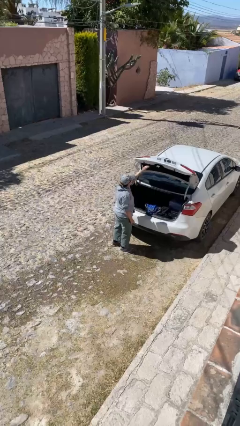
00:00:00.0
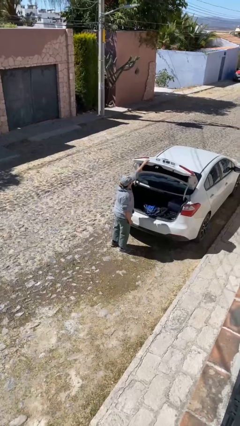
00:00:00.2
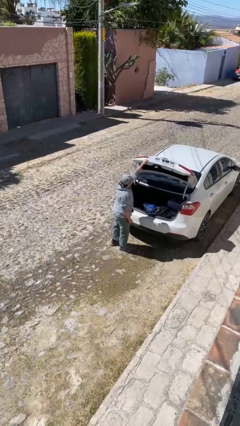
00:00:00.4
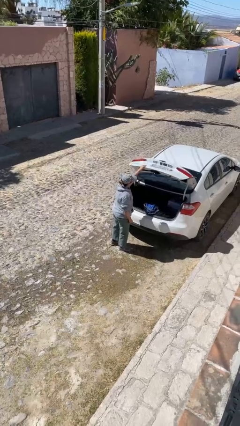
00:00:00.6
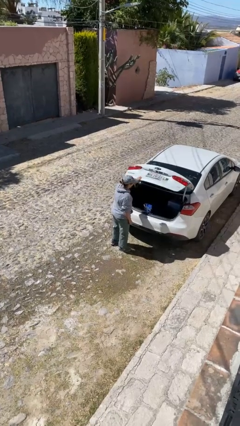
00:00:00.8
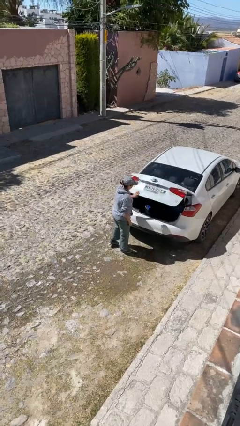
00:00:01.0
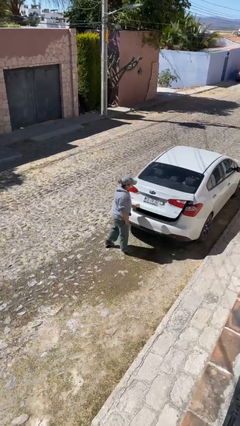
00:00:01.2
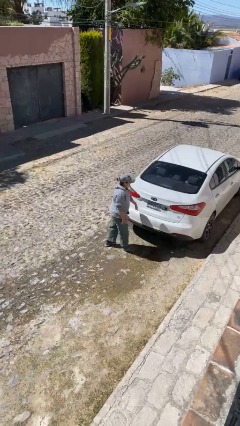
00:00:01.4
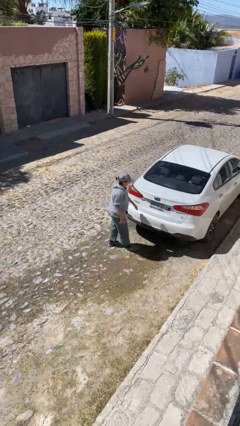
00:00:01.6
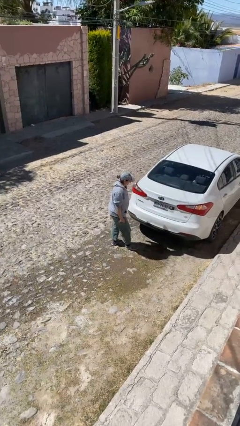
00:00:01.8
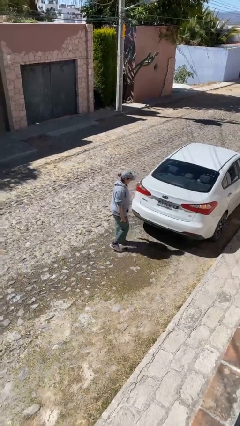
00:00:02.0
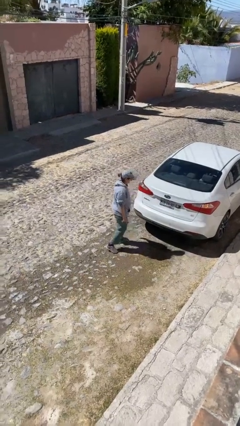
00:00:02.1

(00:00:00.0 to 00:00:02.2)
person closes car trunk

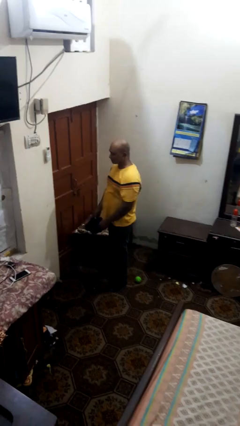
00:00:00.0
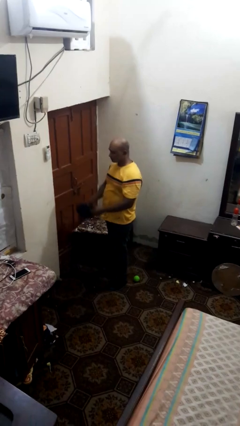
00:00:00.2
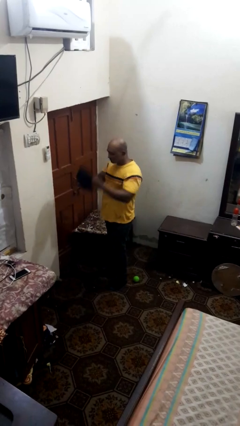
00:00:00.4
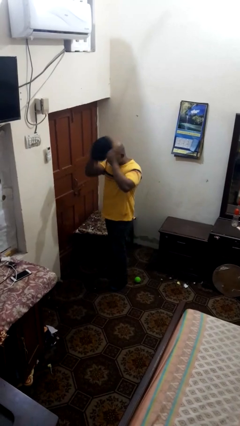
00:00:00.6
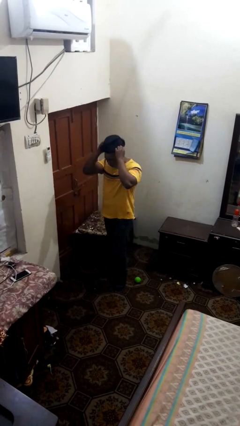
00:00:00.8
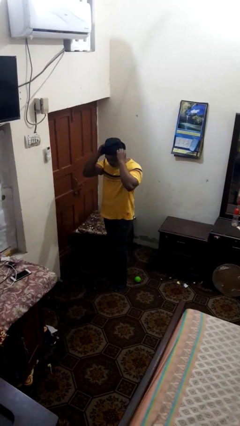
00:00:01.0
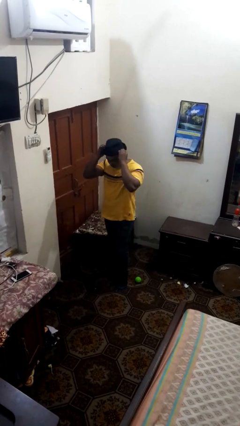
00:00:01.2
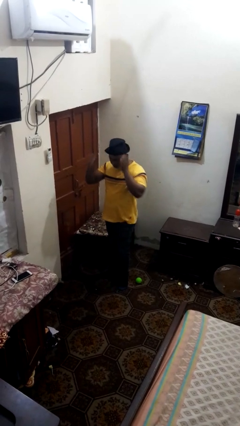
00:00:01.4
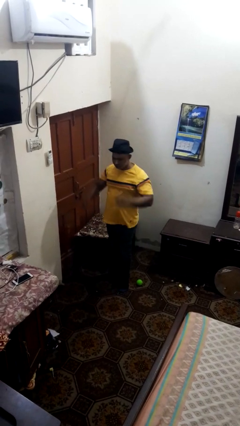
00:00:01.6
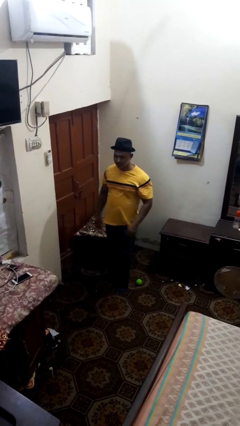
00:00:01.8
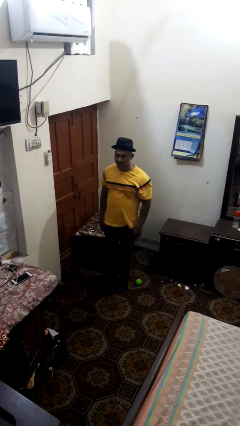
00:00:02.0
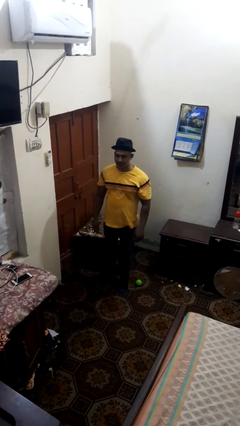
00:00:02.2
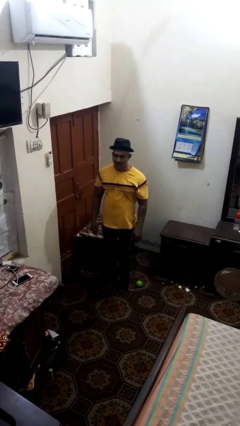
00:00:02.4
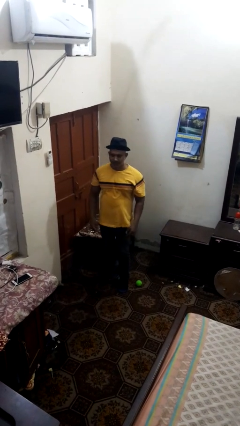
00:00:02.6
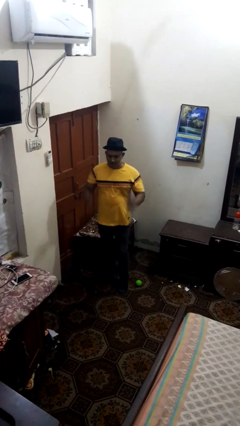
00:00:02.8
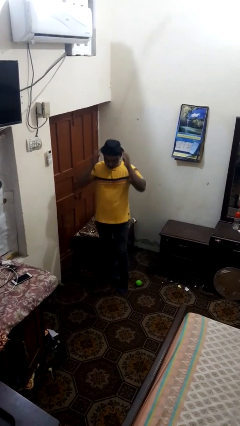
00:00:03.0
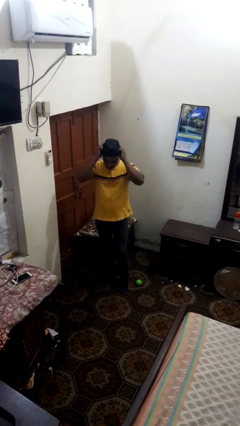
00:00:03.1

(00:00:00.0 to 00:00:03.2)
person puts on hat

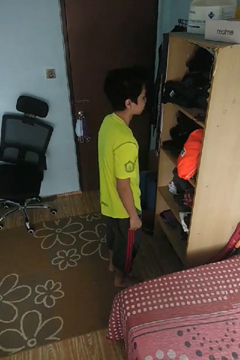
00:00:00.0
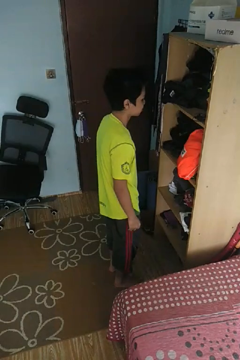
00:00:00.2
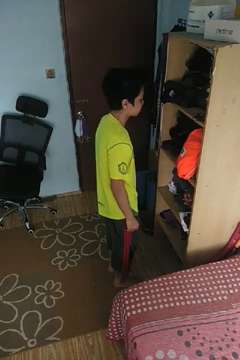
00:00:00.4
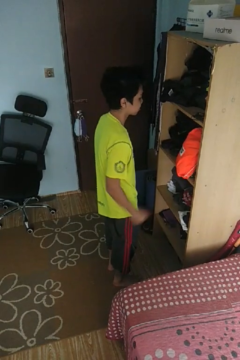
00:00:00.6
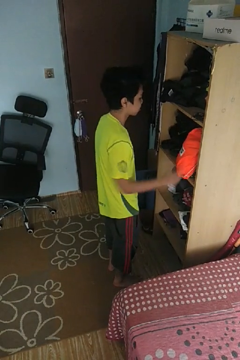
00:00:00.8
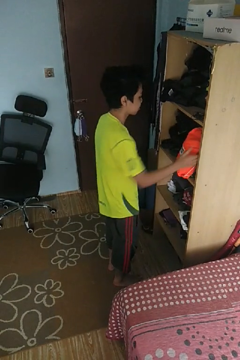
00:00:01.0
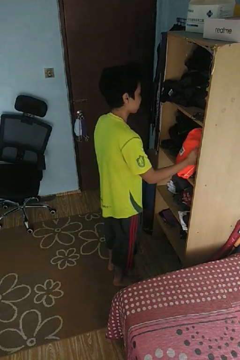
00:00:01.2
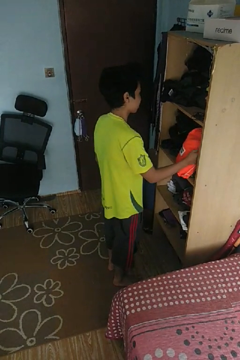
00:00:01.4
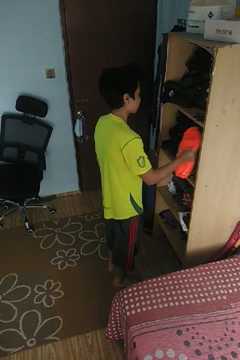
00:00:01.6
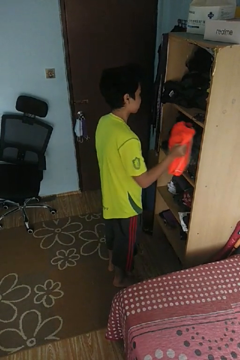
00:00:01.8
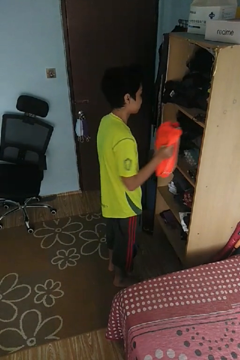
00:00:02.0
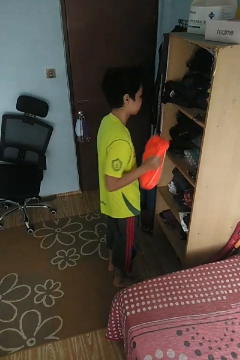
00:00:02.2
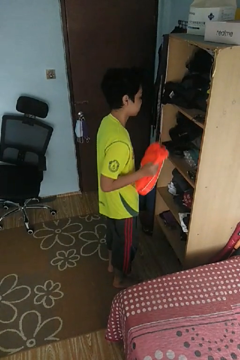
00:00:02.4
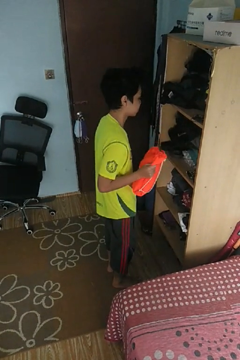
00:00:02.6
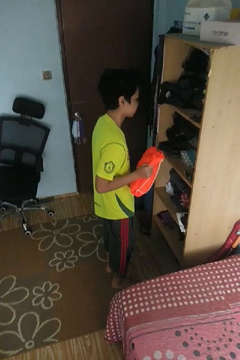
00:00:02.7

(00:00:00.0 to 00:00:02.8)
person picks up object from cabinet

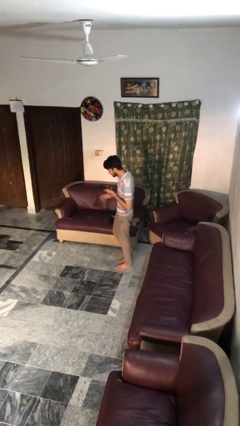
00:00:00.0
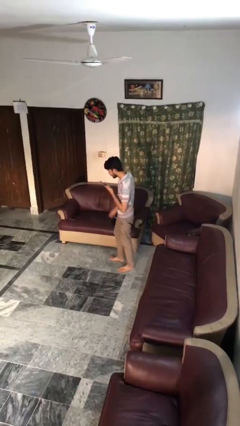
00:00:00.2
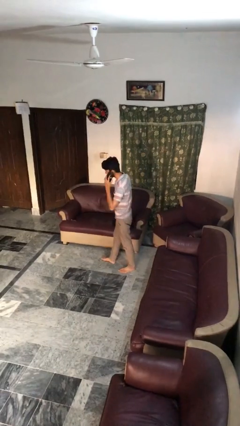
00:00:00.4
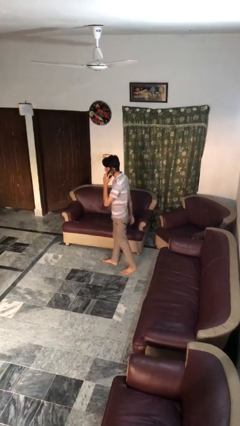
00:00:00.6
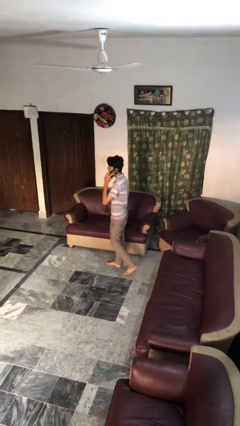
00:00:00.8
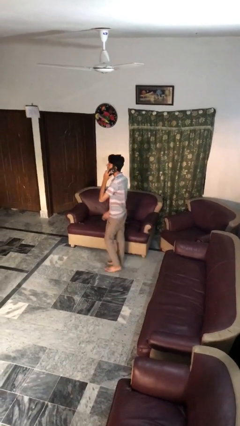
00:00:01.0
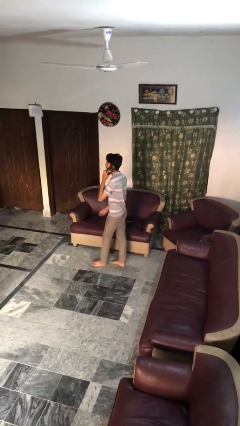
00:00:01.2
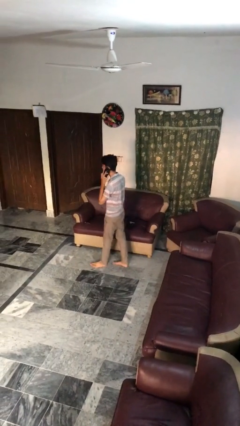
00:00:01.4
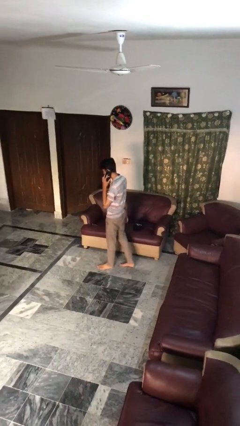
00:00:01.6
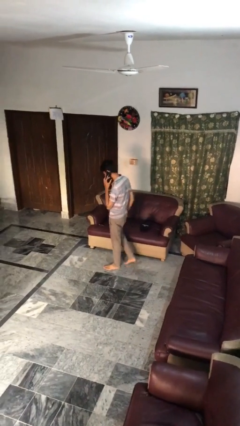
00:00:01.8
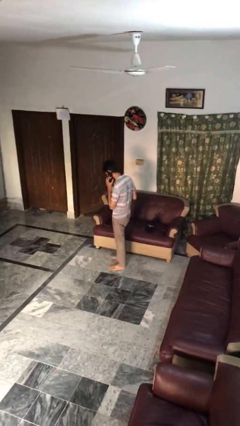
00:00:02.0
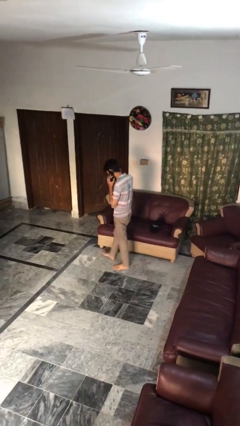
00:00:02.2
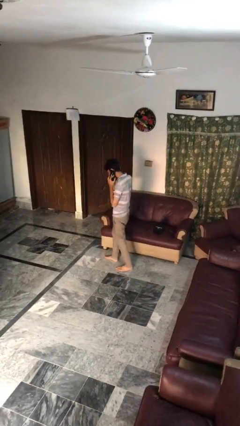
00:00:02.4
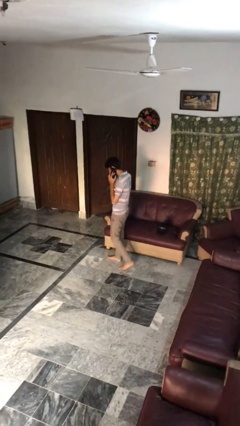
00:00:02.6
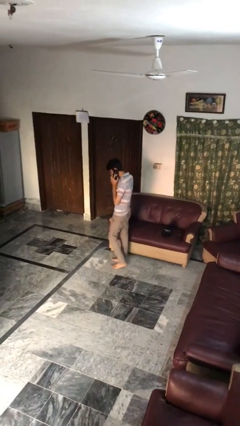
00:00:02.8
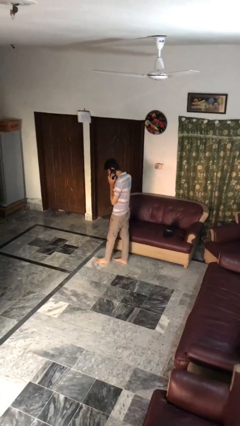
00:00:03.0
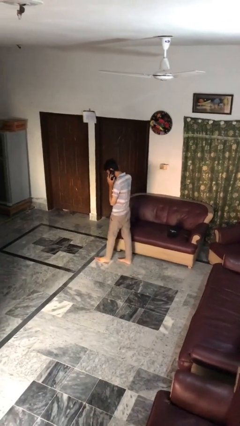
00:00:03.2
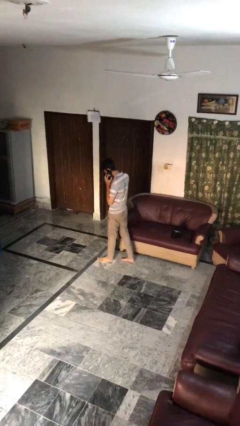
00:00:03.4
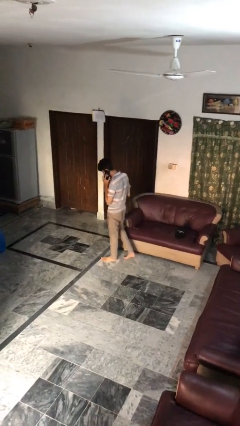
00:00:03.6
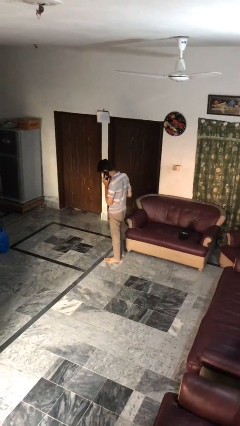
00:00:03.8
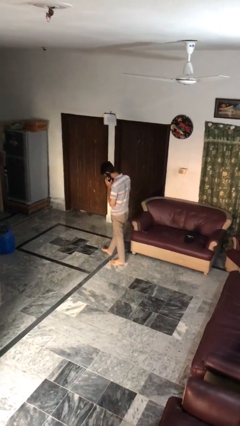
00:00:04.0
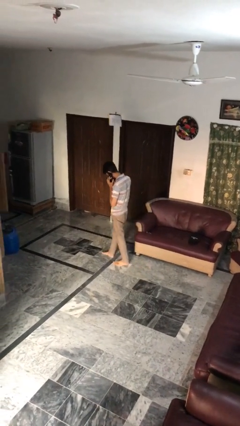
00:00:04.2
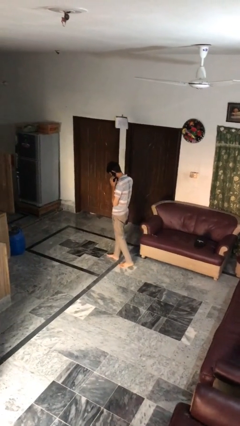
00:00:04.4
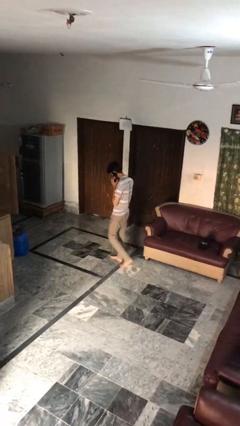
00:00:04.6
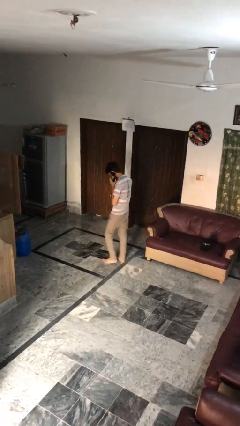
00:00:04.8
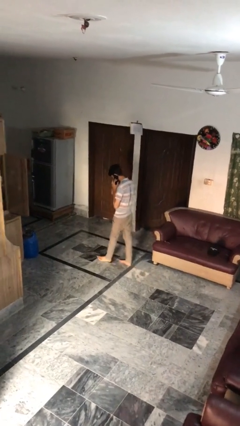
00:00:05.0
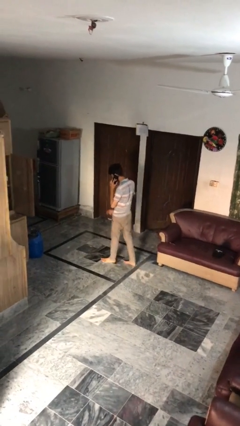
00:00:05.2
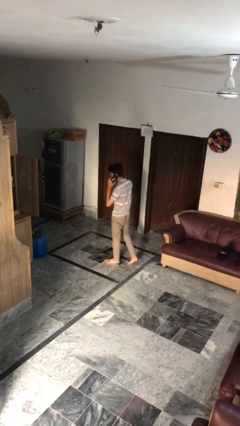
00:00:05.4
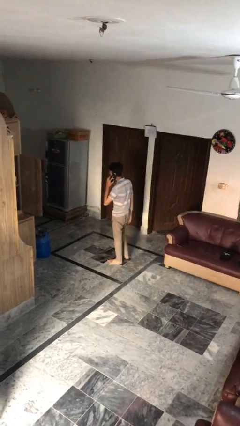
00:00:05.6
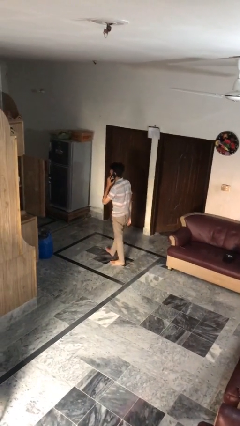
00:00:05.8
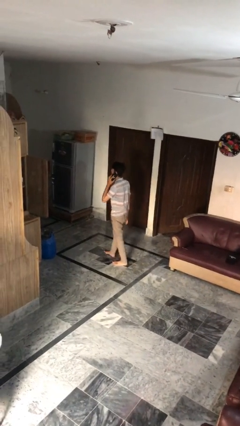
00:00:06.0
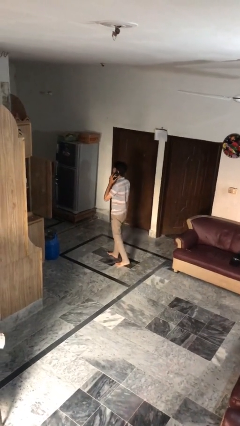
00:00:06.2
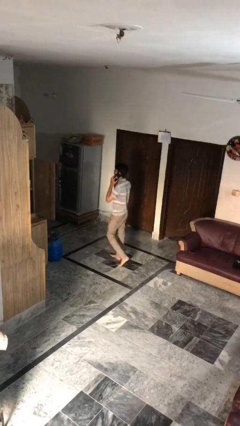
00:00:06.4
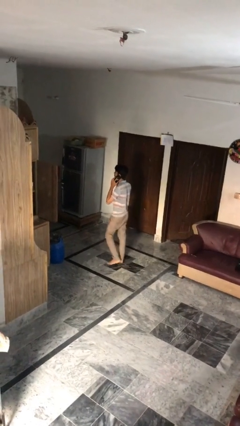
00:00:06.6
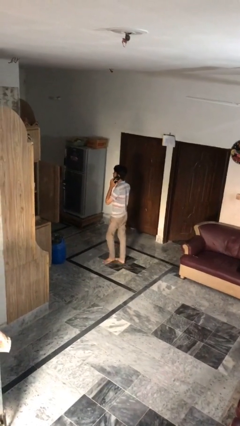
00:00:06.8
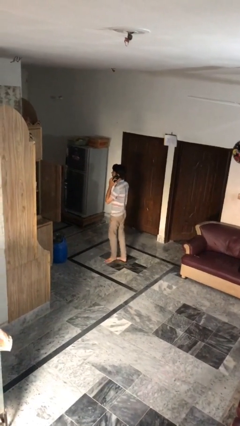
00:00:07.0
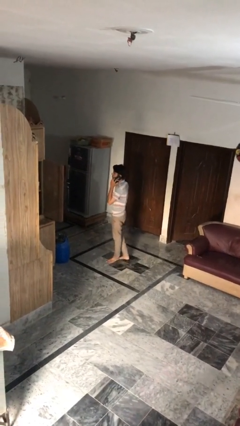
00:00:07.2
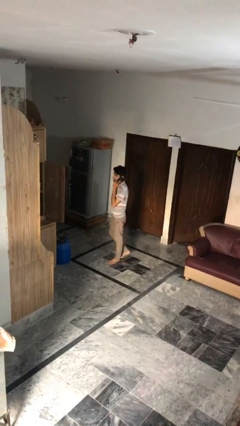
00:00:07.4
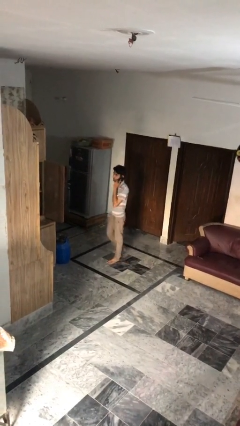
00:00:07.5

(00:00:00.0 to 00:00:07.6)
person talks on phone

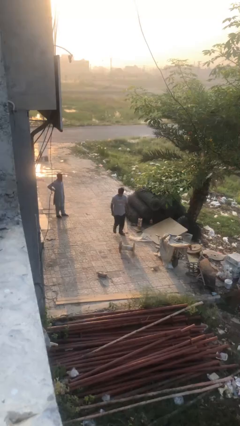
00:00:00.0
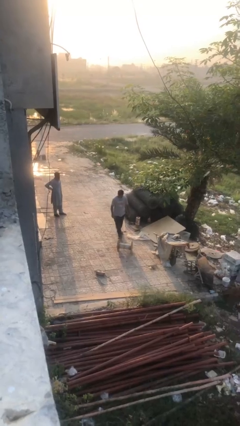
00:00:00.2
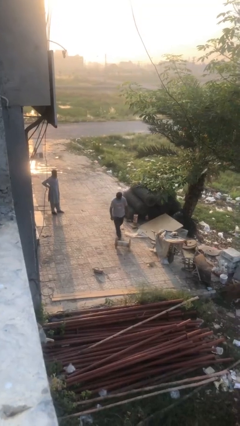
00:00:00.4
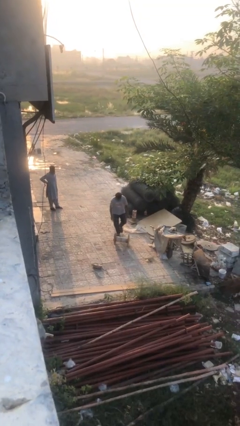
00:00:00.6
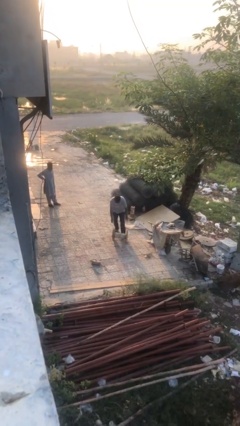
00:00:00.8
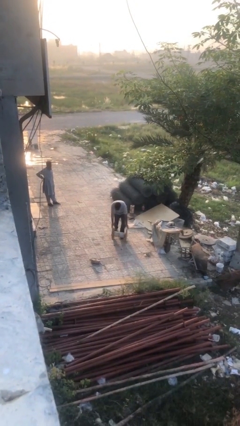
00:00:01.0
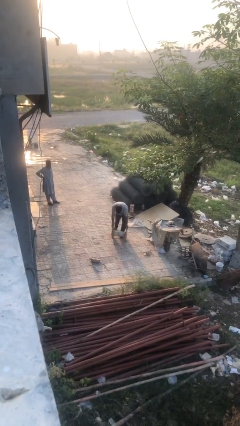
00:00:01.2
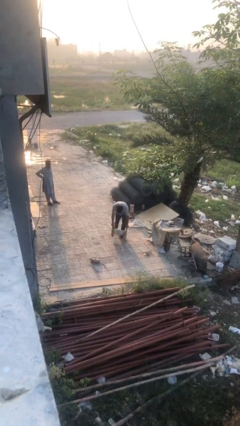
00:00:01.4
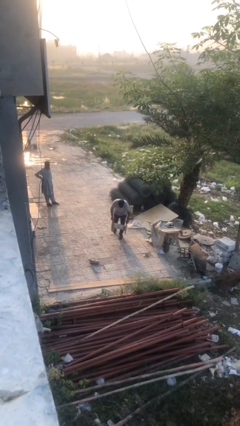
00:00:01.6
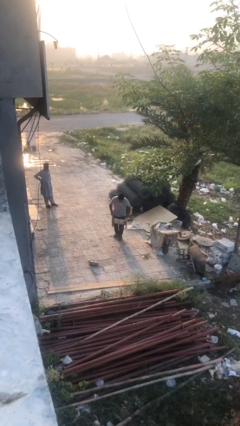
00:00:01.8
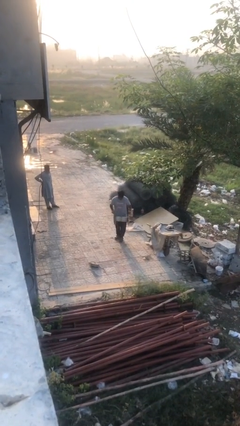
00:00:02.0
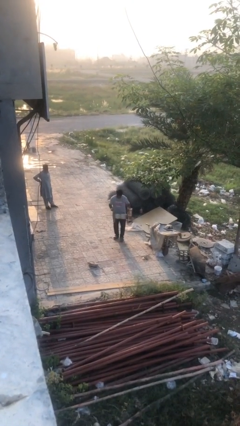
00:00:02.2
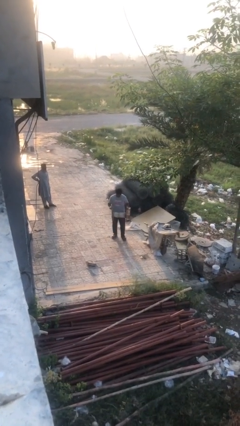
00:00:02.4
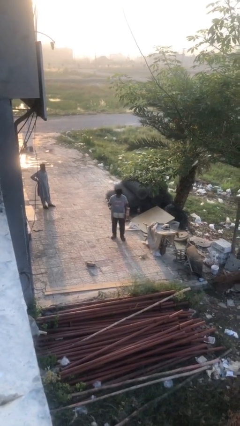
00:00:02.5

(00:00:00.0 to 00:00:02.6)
person picks up object from floor
